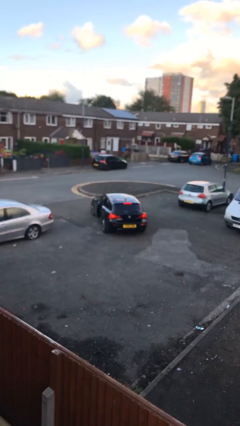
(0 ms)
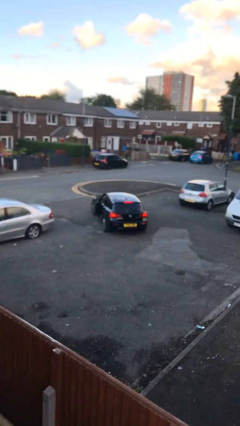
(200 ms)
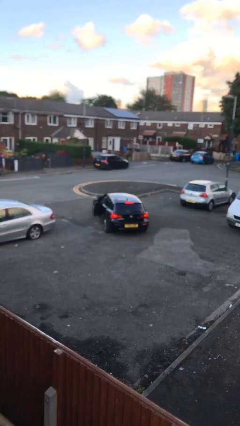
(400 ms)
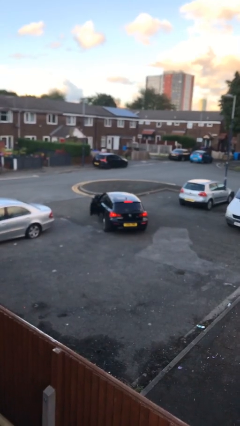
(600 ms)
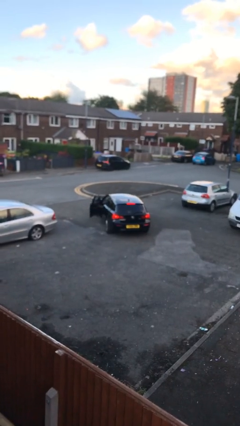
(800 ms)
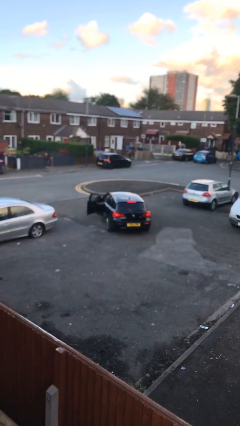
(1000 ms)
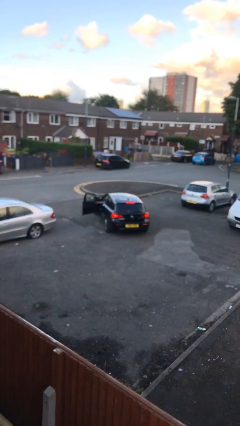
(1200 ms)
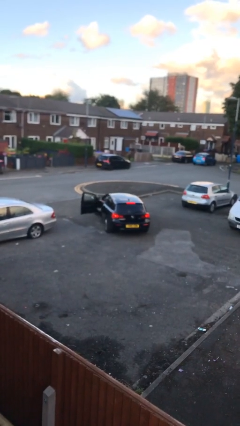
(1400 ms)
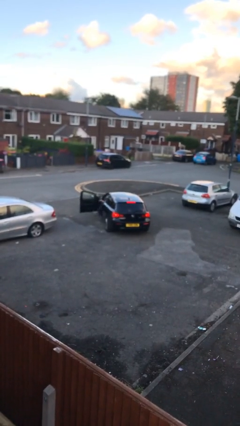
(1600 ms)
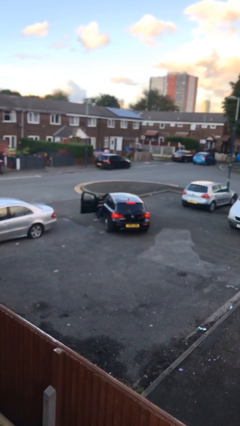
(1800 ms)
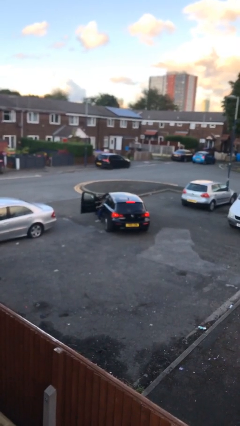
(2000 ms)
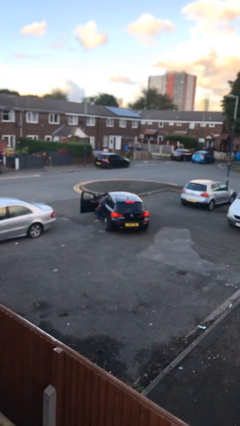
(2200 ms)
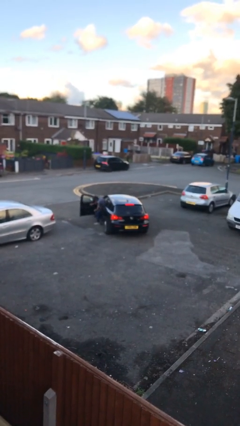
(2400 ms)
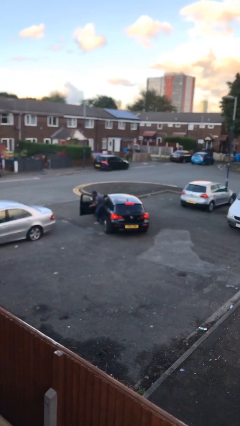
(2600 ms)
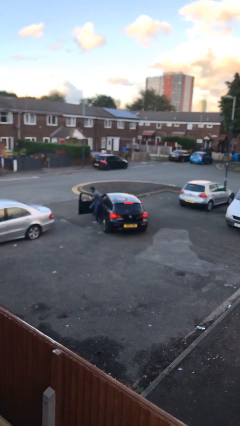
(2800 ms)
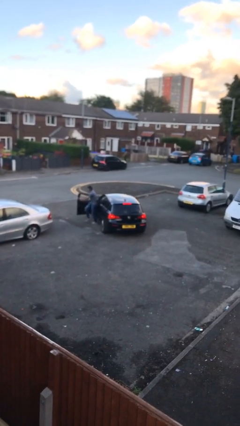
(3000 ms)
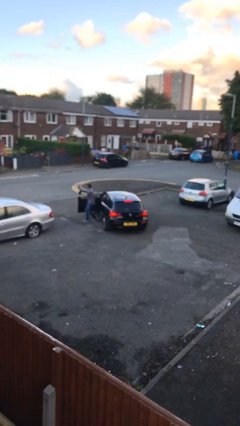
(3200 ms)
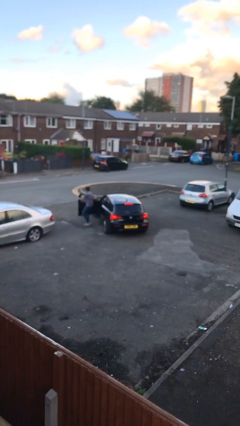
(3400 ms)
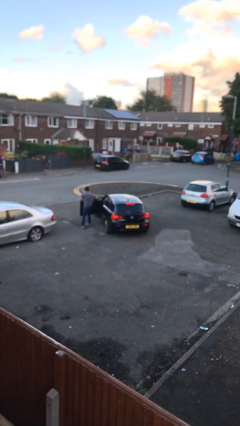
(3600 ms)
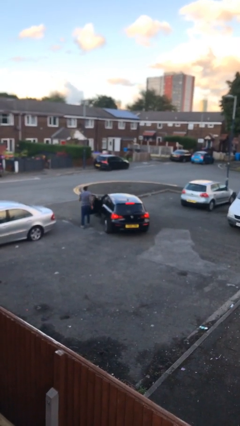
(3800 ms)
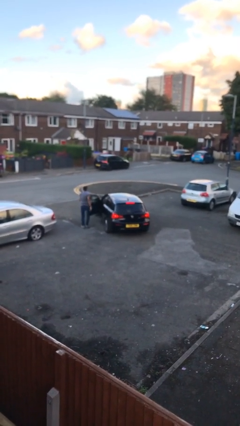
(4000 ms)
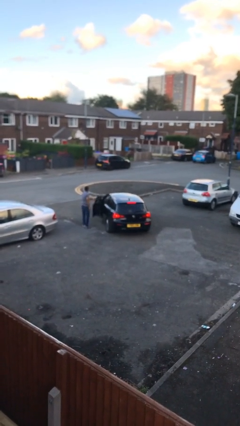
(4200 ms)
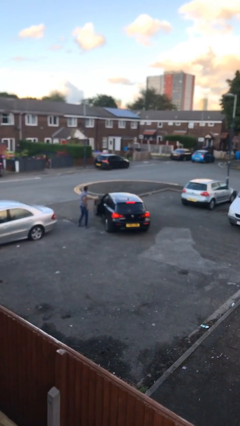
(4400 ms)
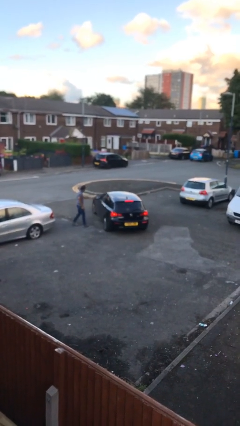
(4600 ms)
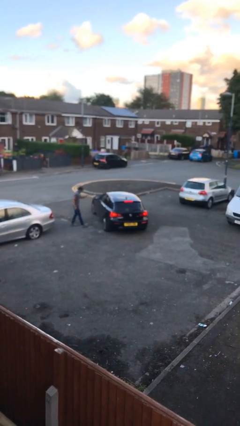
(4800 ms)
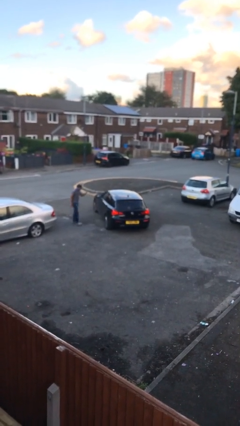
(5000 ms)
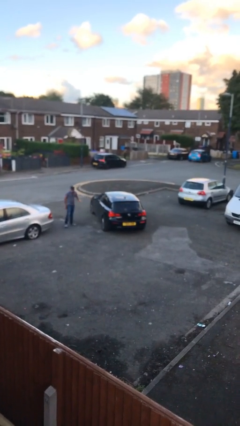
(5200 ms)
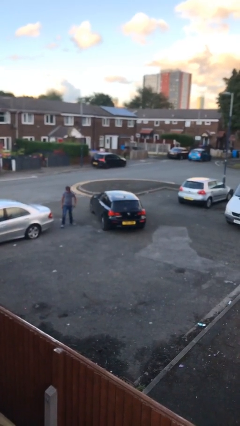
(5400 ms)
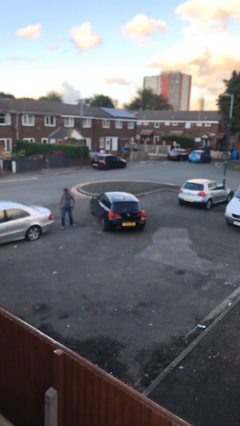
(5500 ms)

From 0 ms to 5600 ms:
car drops off person

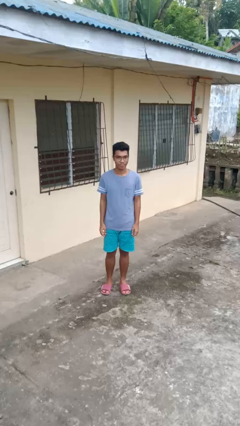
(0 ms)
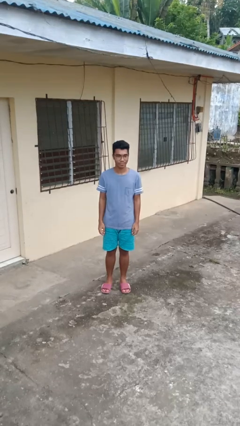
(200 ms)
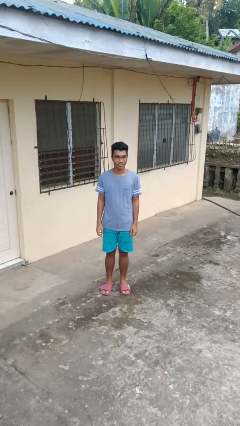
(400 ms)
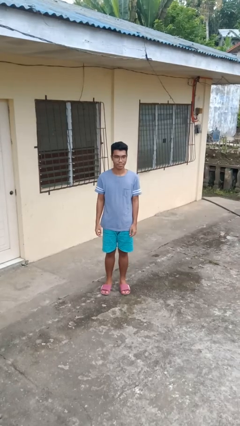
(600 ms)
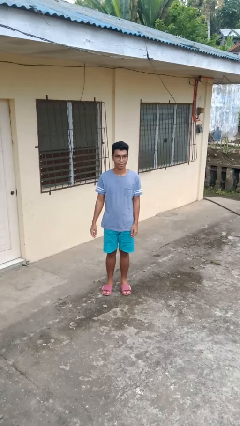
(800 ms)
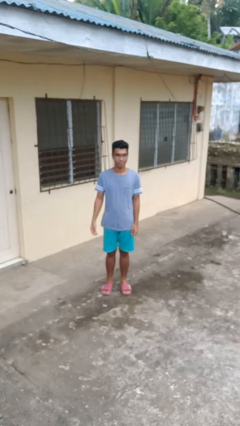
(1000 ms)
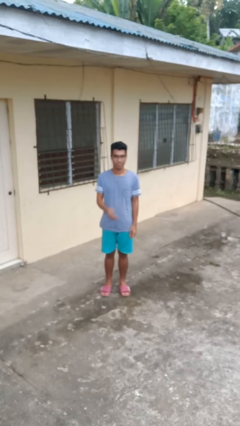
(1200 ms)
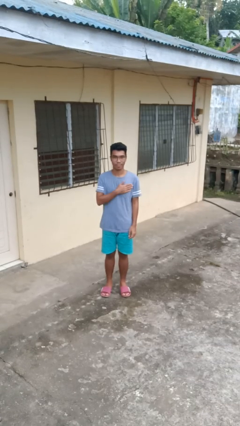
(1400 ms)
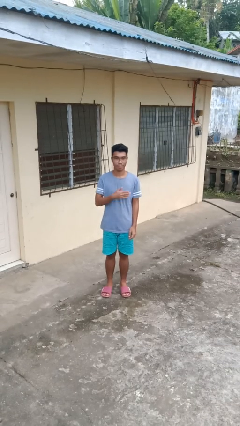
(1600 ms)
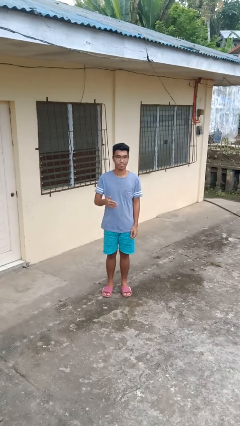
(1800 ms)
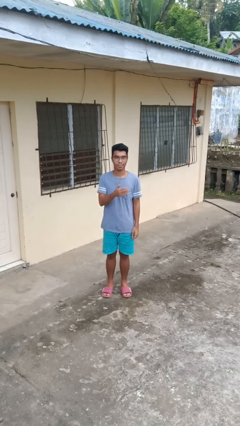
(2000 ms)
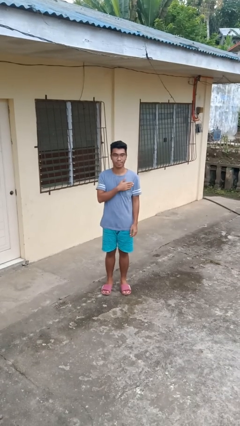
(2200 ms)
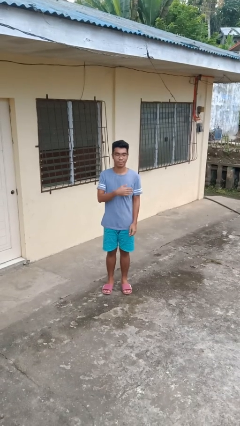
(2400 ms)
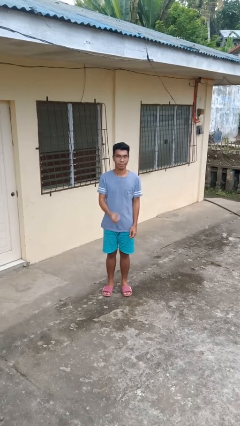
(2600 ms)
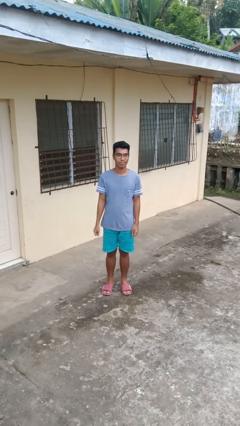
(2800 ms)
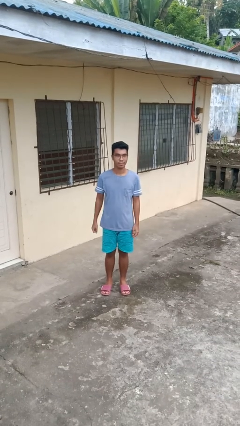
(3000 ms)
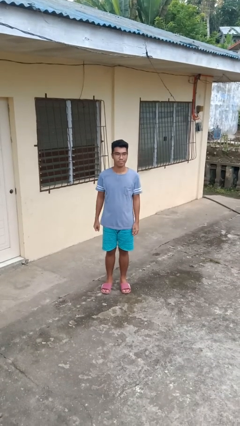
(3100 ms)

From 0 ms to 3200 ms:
person drums on chest

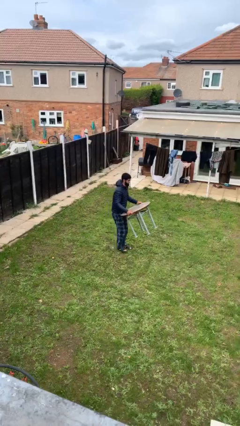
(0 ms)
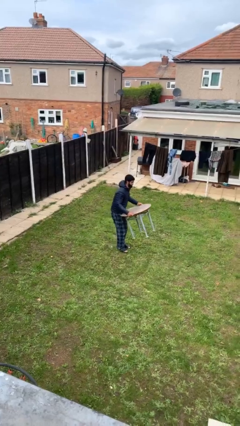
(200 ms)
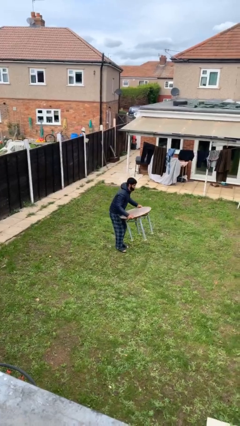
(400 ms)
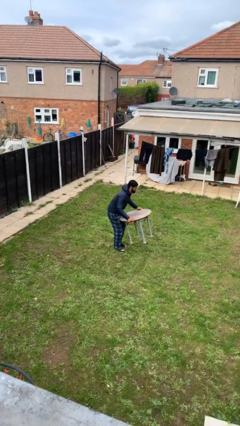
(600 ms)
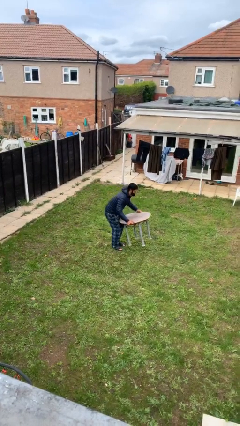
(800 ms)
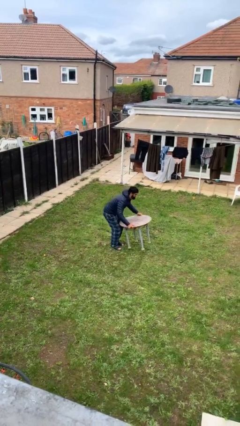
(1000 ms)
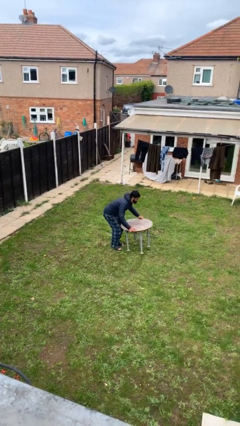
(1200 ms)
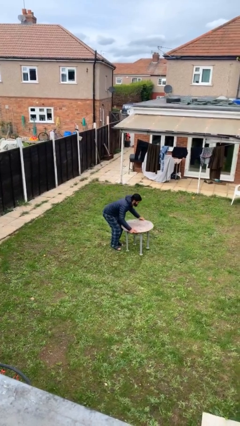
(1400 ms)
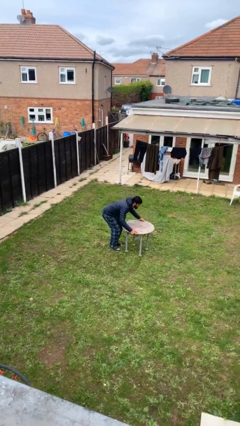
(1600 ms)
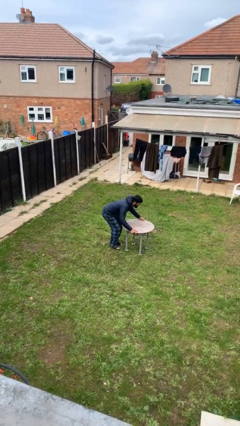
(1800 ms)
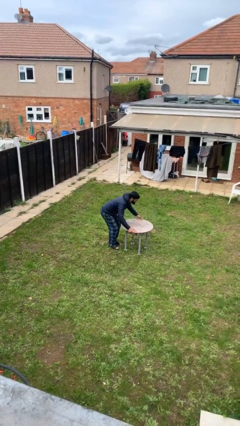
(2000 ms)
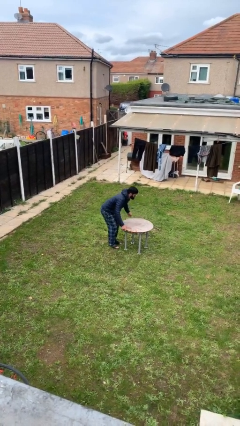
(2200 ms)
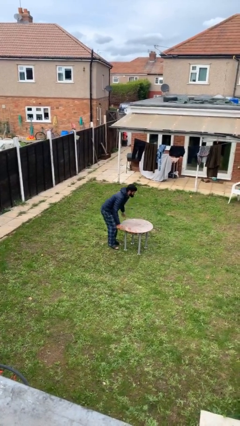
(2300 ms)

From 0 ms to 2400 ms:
person puts down object on floor

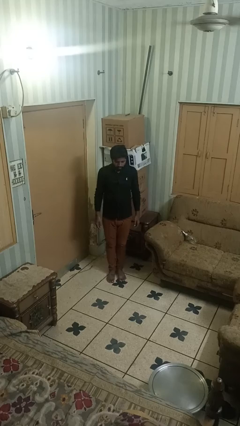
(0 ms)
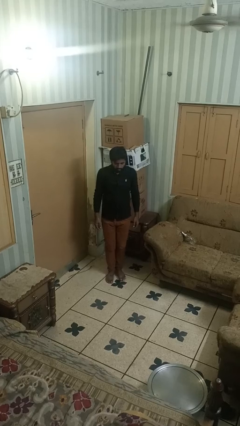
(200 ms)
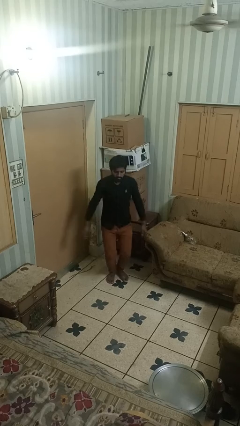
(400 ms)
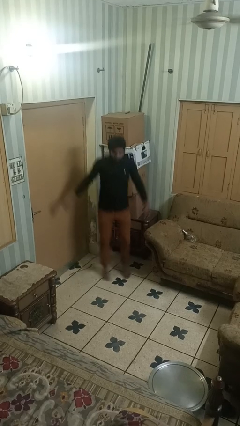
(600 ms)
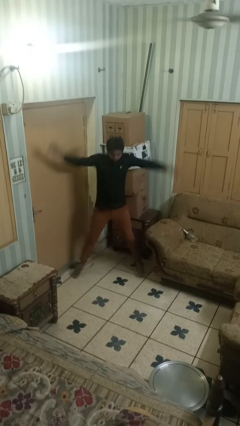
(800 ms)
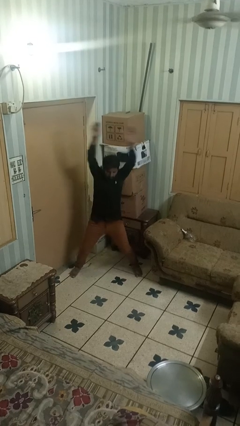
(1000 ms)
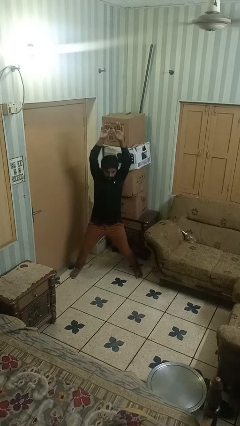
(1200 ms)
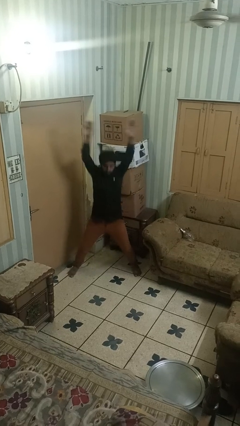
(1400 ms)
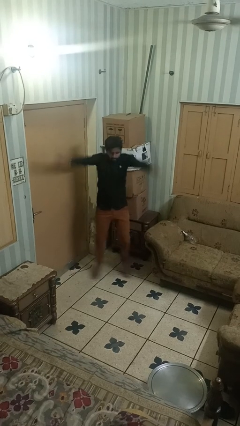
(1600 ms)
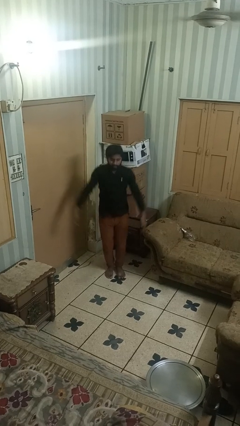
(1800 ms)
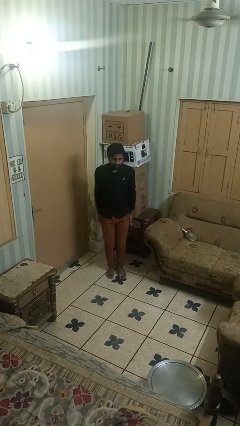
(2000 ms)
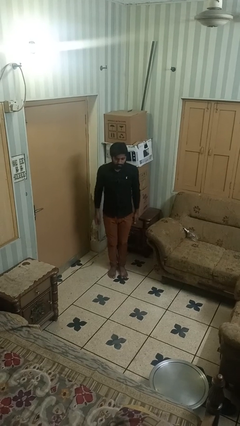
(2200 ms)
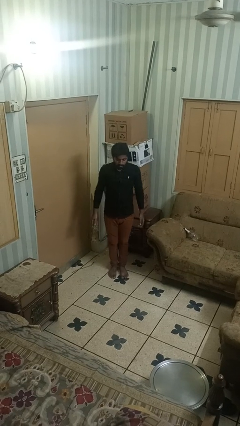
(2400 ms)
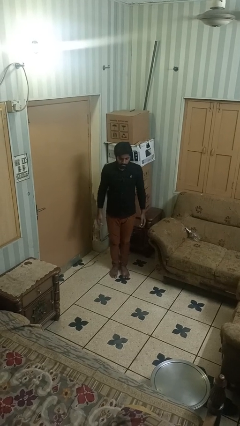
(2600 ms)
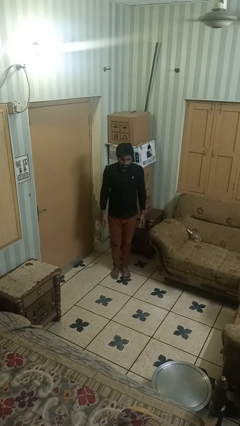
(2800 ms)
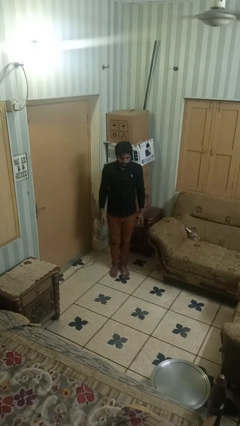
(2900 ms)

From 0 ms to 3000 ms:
person exercises with jumping jacks

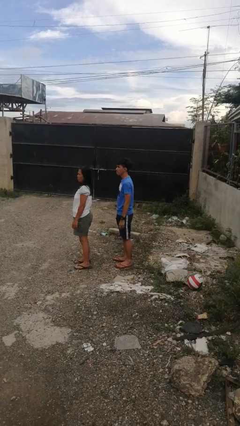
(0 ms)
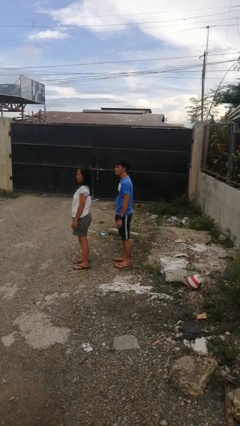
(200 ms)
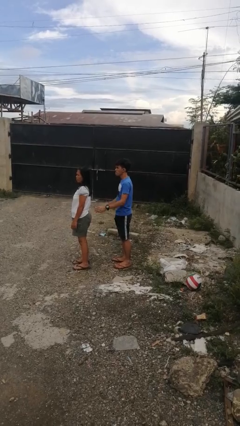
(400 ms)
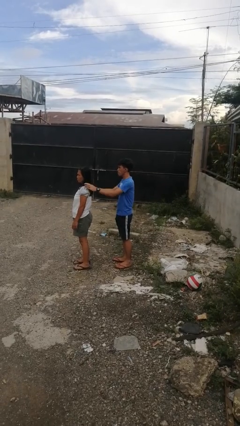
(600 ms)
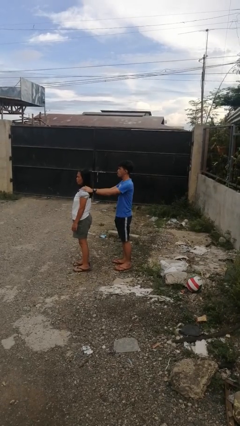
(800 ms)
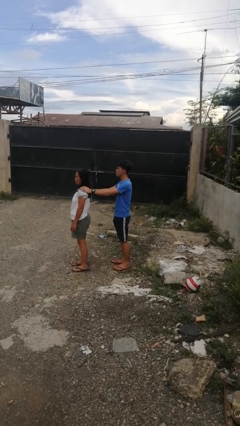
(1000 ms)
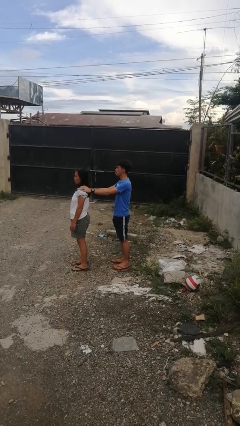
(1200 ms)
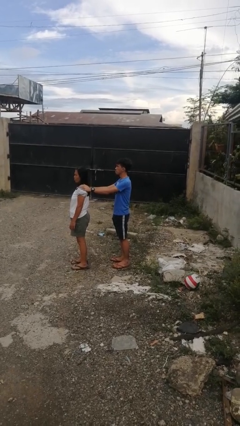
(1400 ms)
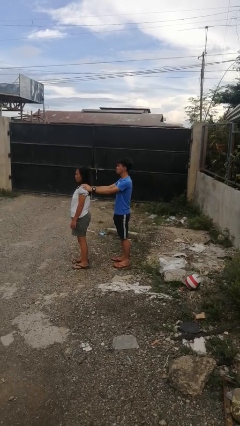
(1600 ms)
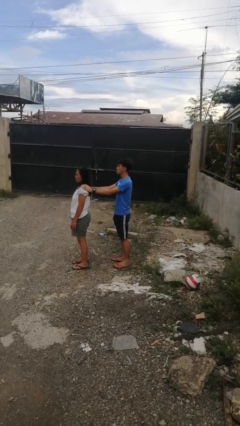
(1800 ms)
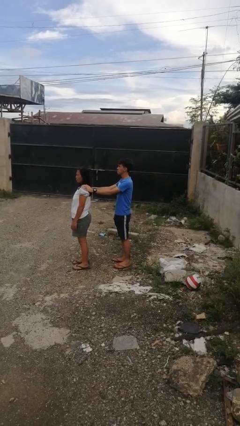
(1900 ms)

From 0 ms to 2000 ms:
person grabs person by shoulder

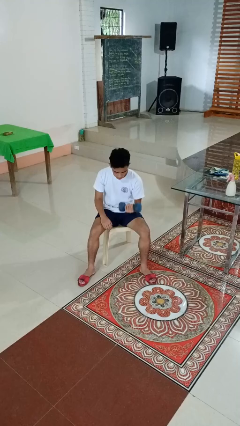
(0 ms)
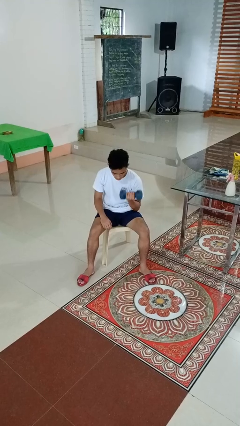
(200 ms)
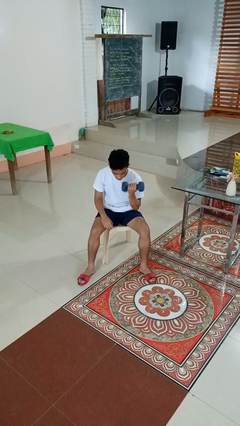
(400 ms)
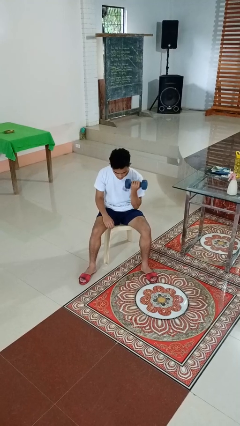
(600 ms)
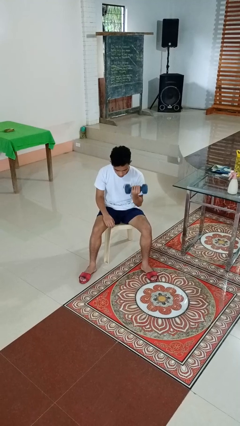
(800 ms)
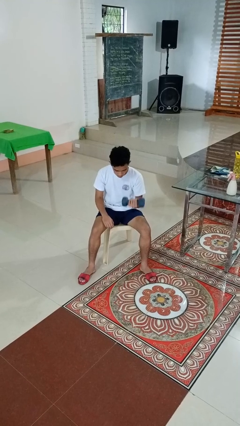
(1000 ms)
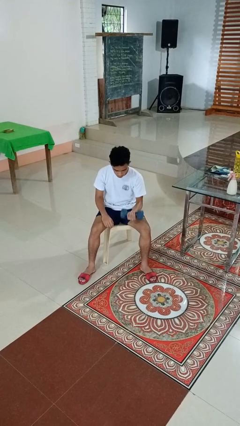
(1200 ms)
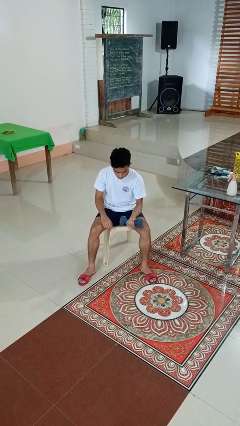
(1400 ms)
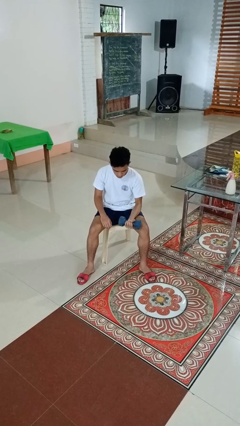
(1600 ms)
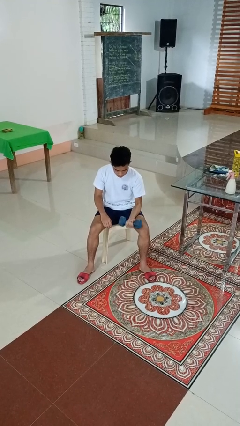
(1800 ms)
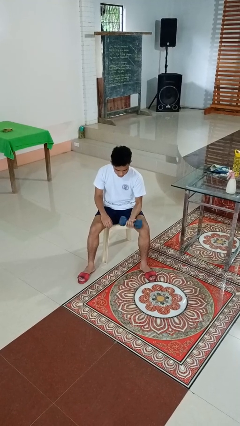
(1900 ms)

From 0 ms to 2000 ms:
person lifts dumbbells
